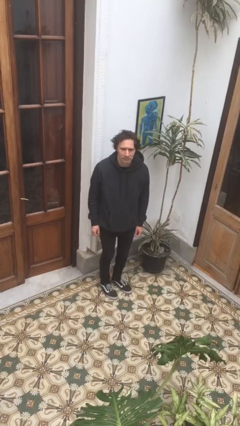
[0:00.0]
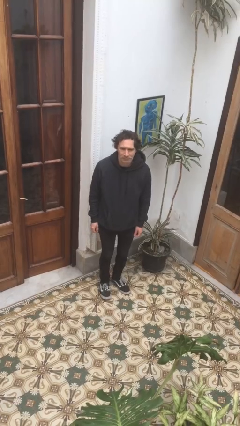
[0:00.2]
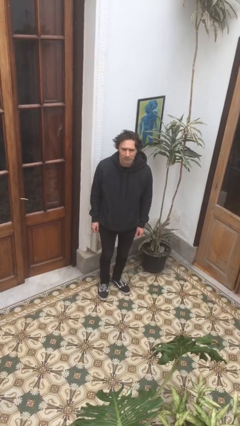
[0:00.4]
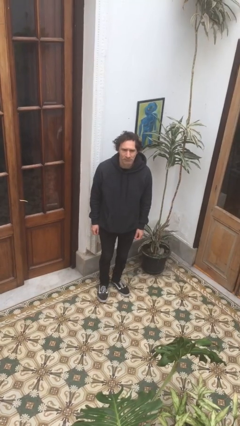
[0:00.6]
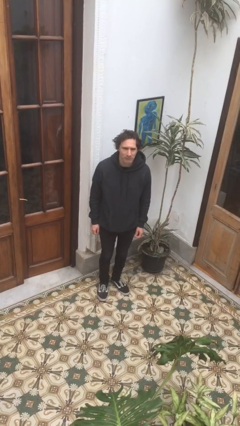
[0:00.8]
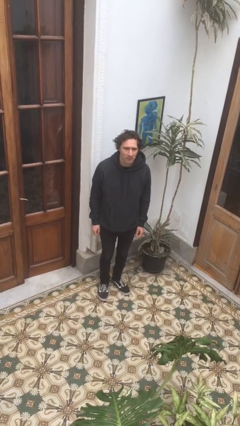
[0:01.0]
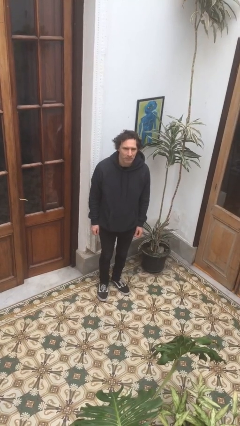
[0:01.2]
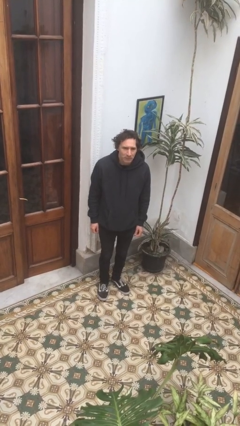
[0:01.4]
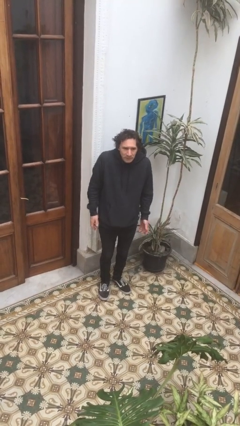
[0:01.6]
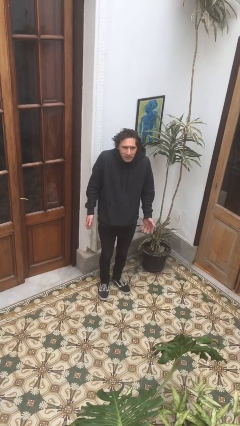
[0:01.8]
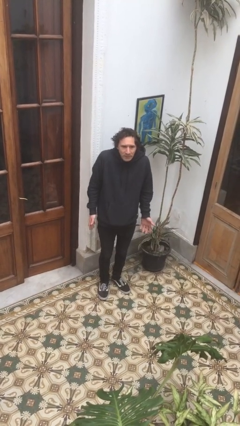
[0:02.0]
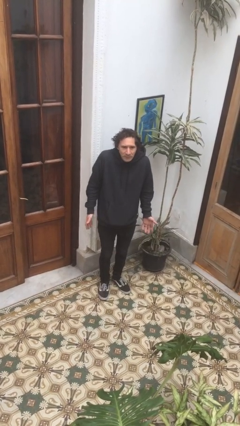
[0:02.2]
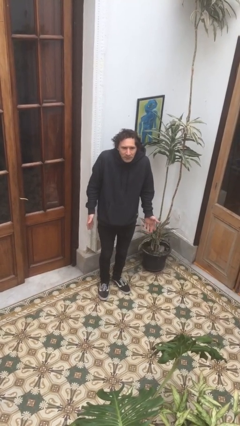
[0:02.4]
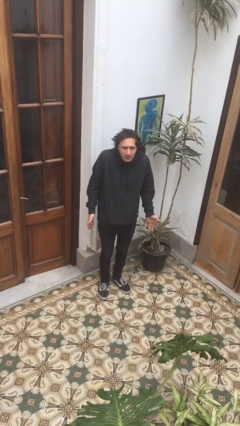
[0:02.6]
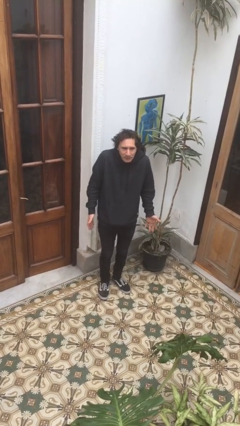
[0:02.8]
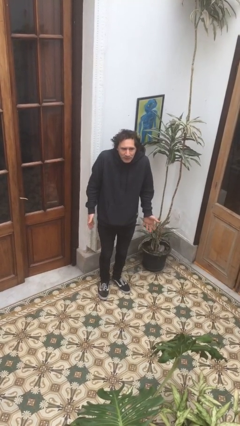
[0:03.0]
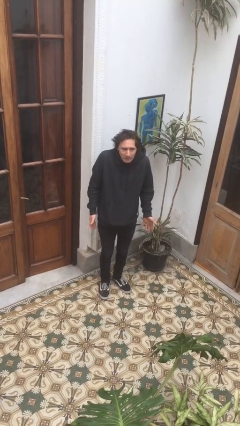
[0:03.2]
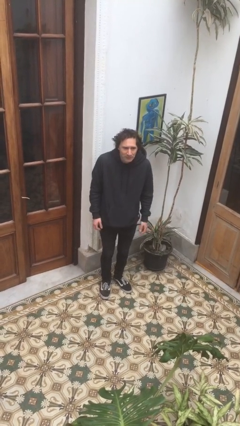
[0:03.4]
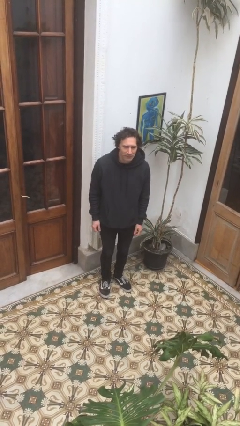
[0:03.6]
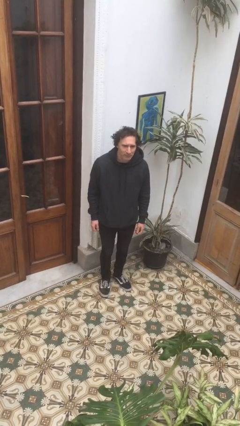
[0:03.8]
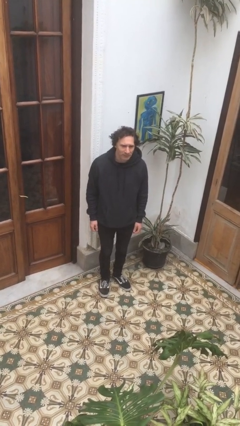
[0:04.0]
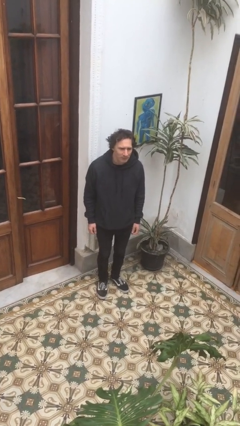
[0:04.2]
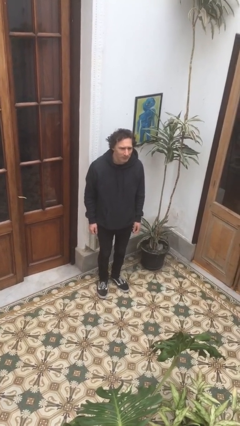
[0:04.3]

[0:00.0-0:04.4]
person shrugs

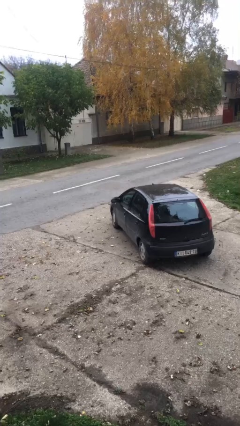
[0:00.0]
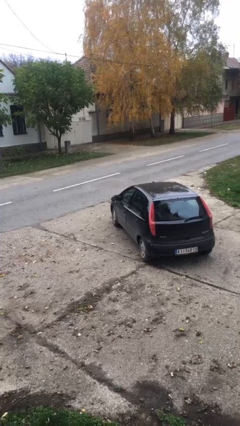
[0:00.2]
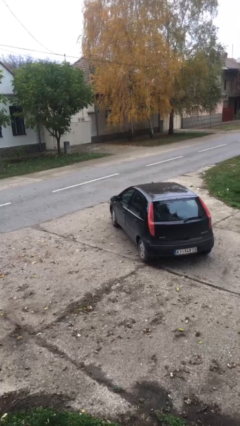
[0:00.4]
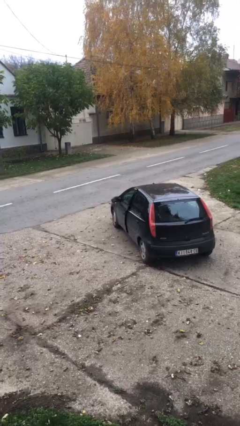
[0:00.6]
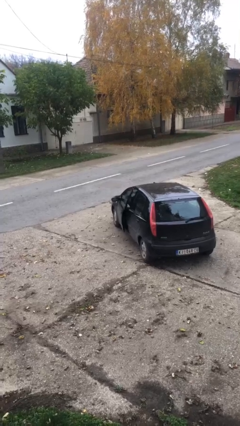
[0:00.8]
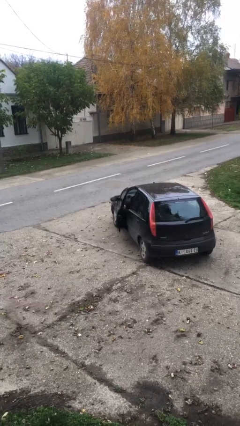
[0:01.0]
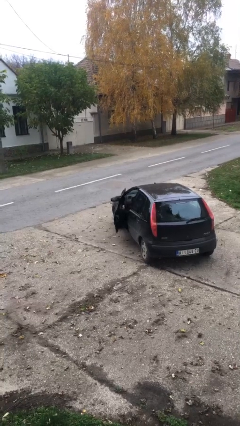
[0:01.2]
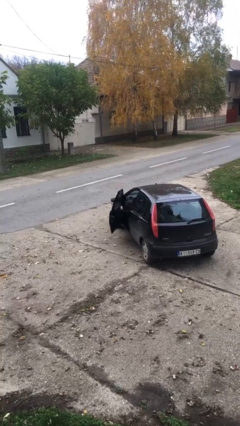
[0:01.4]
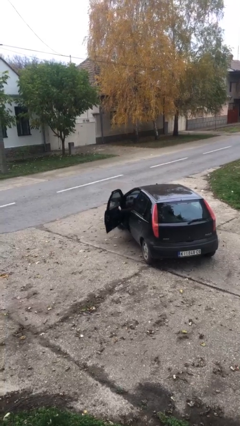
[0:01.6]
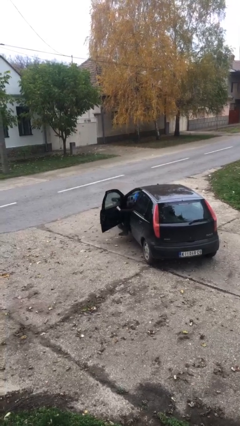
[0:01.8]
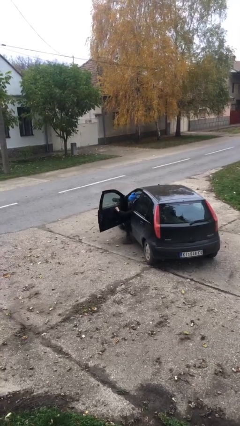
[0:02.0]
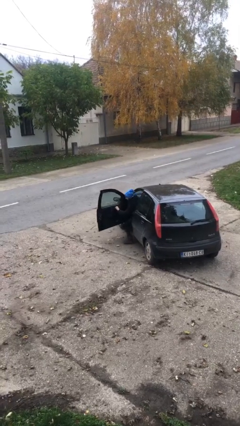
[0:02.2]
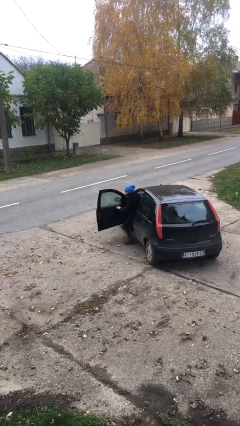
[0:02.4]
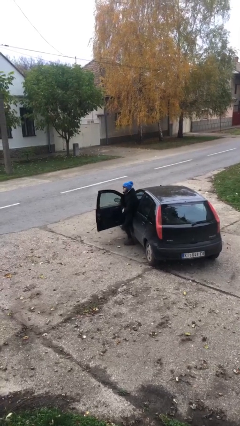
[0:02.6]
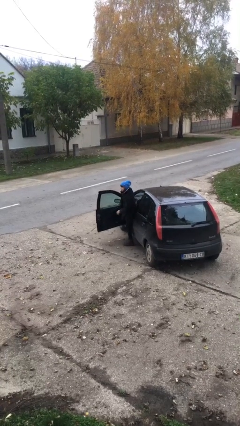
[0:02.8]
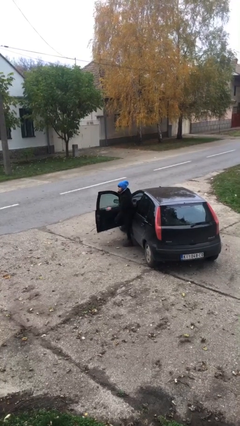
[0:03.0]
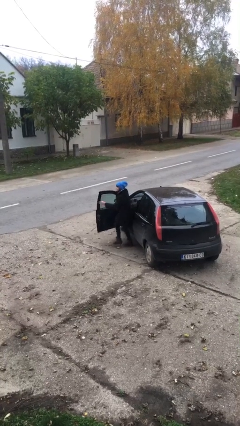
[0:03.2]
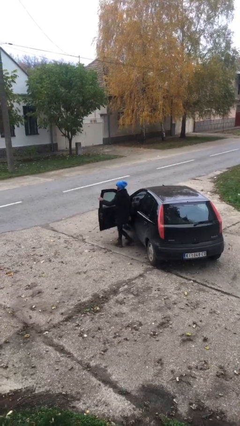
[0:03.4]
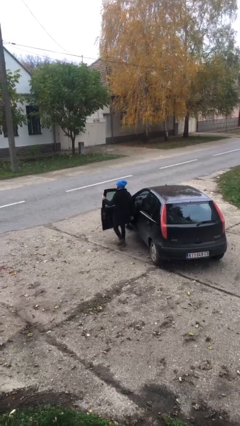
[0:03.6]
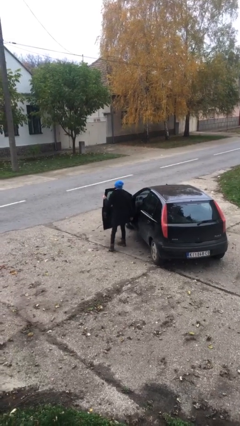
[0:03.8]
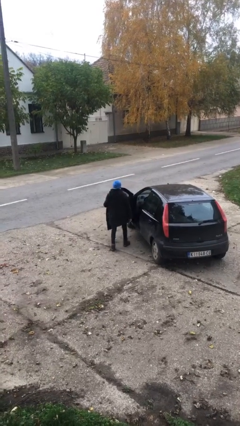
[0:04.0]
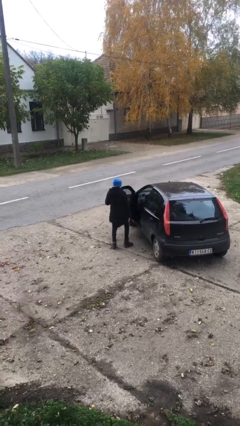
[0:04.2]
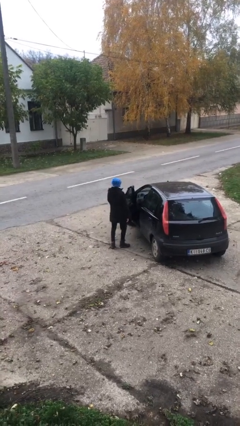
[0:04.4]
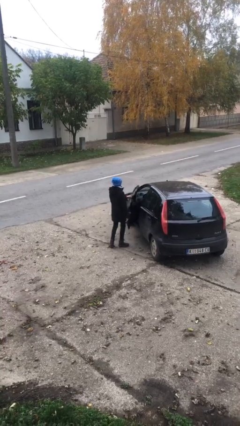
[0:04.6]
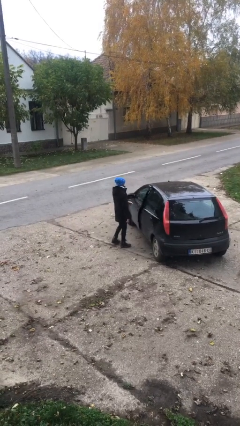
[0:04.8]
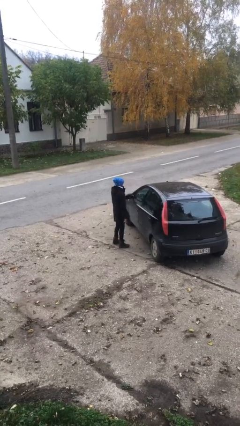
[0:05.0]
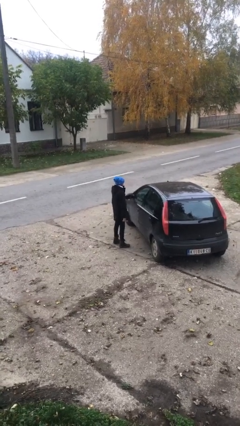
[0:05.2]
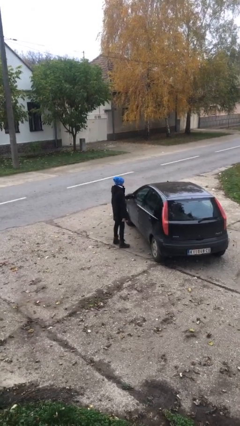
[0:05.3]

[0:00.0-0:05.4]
person exits car

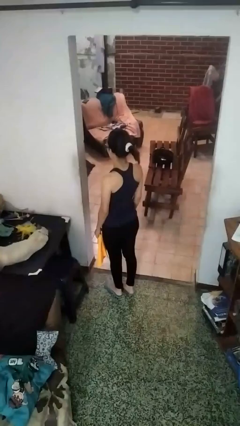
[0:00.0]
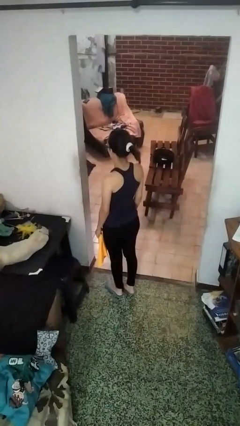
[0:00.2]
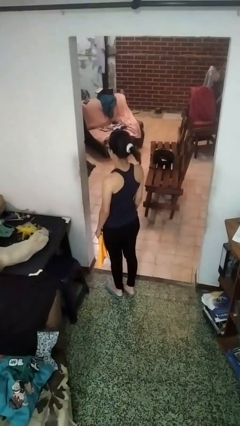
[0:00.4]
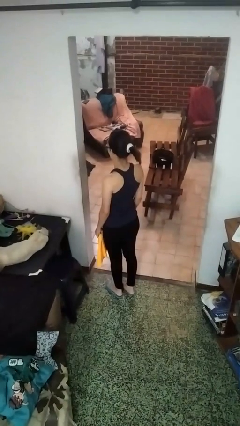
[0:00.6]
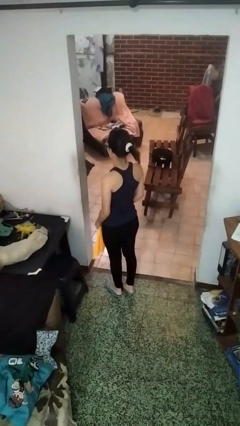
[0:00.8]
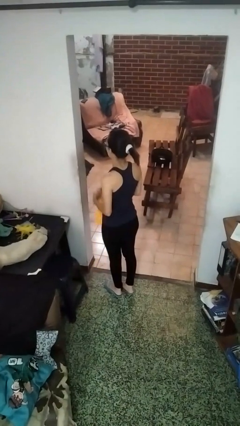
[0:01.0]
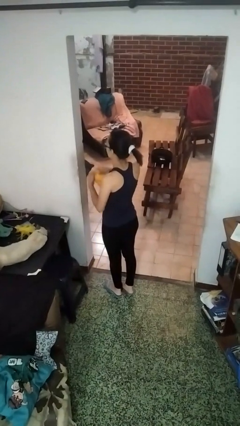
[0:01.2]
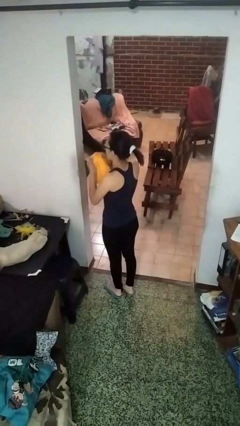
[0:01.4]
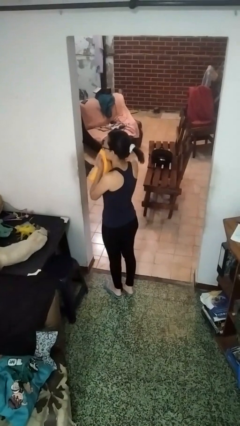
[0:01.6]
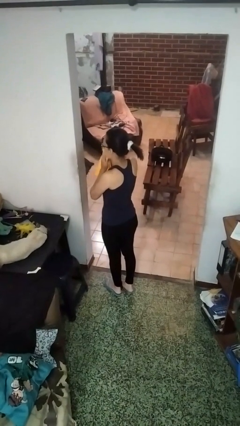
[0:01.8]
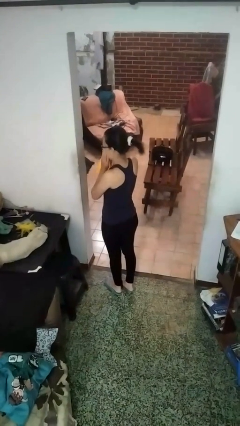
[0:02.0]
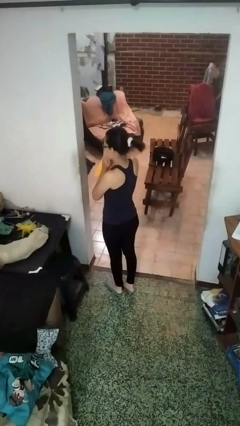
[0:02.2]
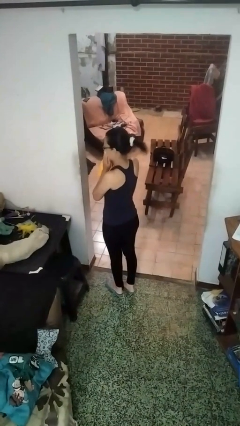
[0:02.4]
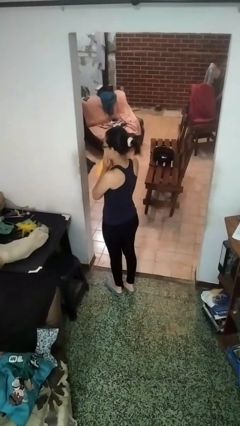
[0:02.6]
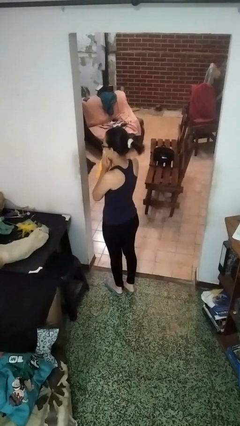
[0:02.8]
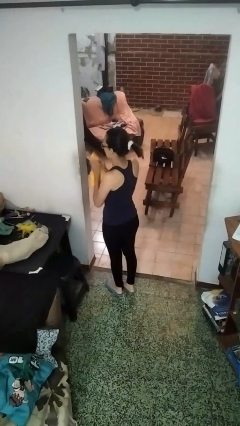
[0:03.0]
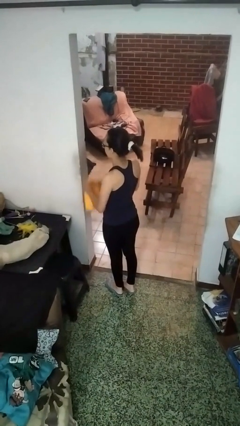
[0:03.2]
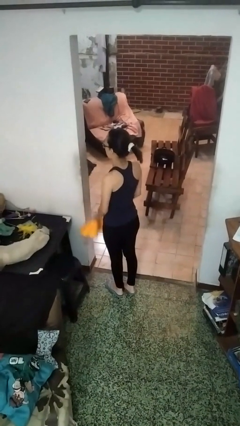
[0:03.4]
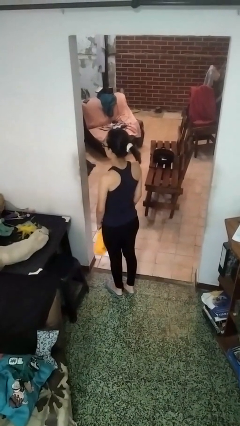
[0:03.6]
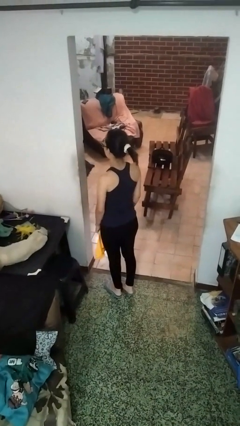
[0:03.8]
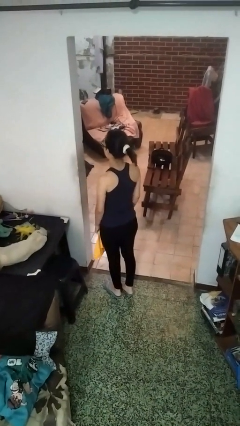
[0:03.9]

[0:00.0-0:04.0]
person blows nose

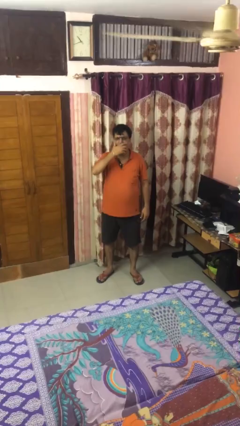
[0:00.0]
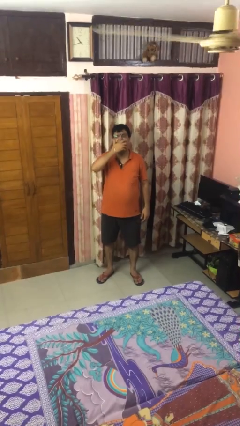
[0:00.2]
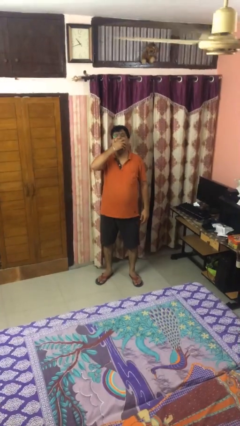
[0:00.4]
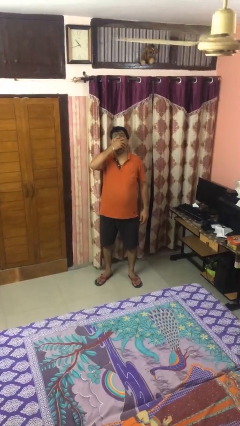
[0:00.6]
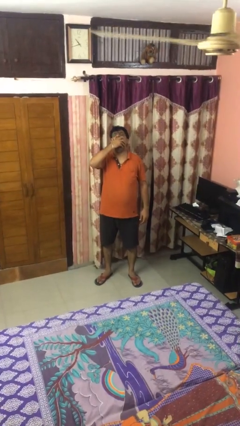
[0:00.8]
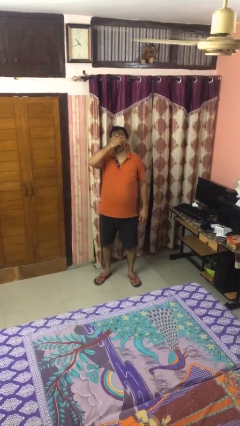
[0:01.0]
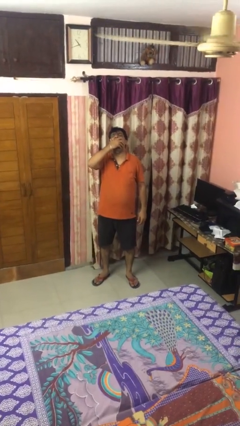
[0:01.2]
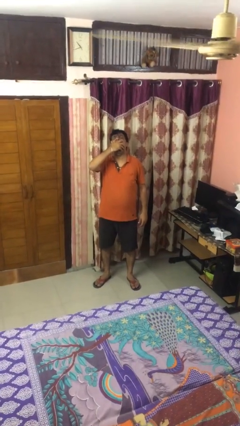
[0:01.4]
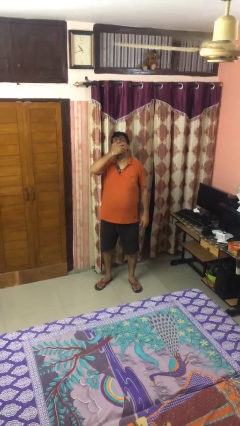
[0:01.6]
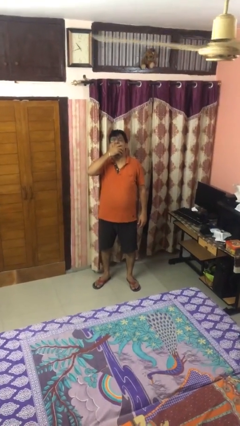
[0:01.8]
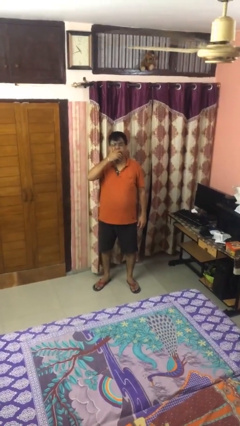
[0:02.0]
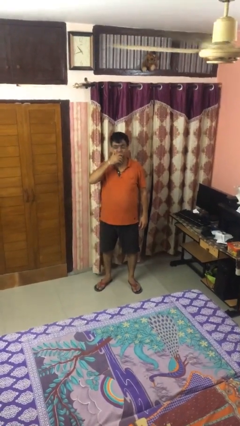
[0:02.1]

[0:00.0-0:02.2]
person yawns

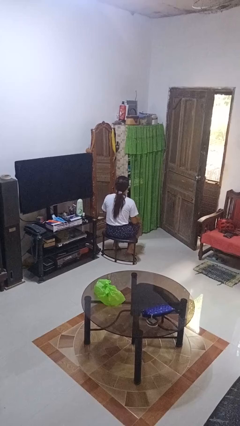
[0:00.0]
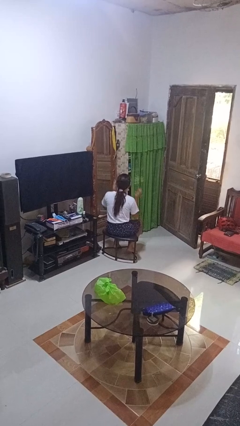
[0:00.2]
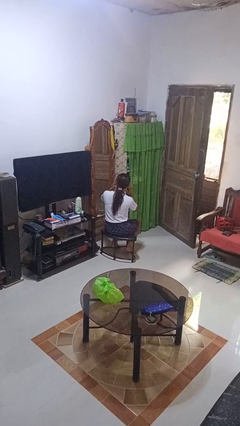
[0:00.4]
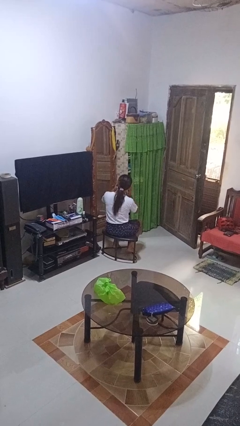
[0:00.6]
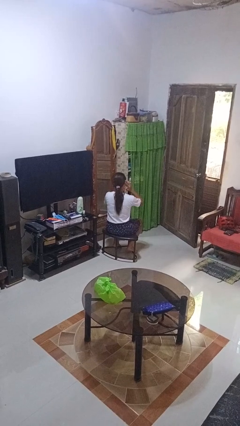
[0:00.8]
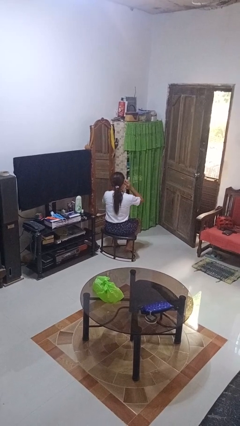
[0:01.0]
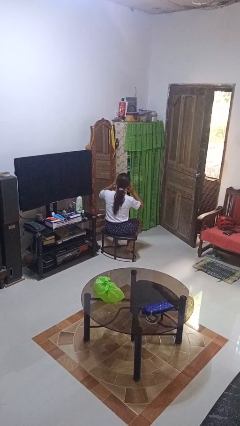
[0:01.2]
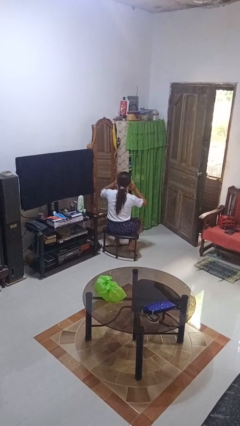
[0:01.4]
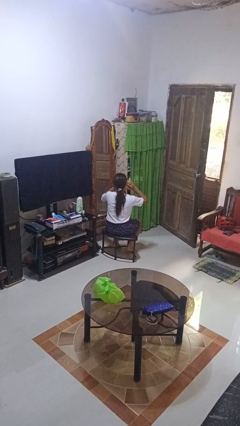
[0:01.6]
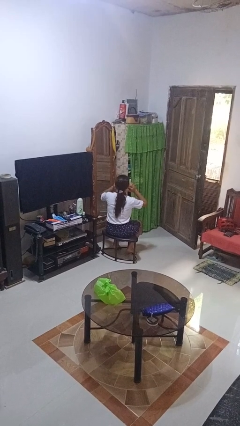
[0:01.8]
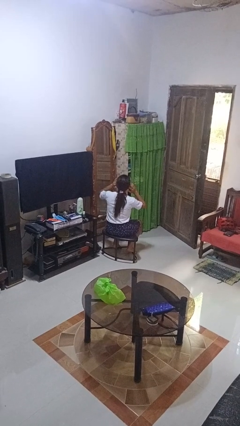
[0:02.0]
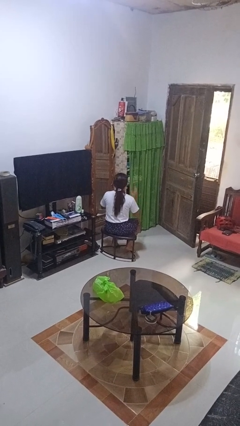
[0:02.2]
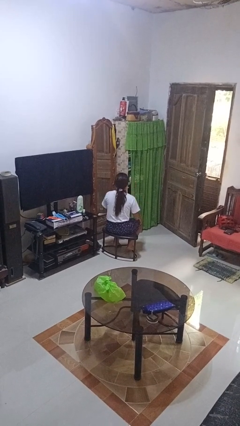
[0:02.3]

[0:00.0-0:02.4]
person puts fingers in ear
